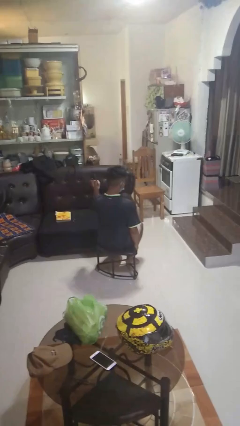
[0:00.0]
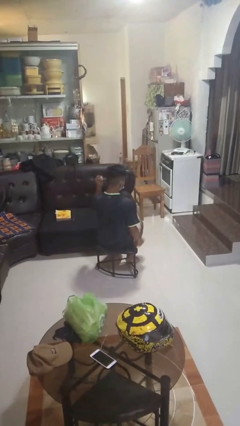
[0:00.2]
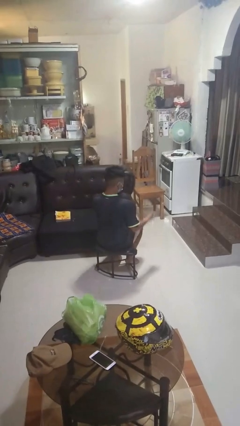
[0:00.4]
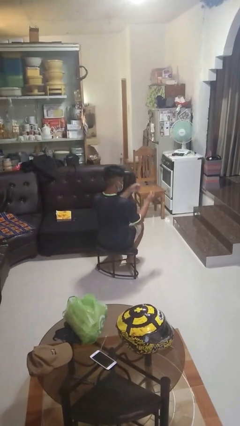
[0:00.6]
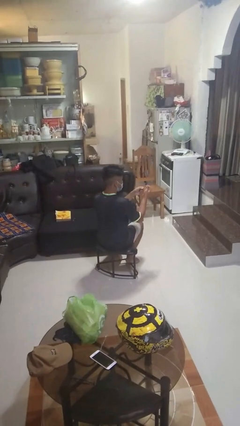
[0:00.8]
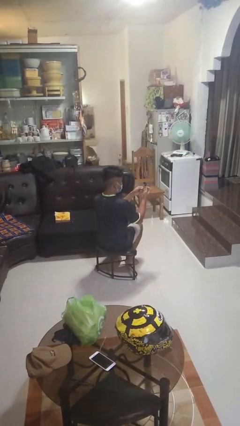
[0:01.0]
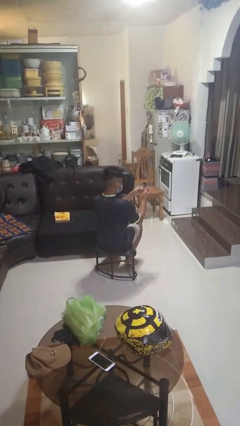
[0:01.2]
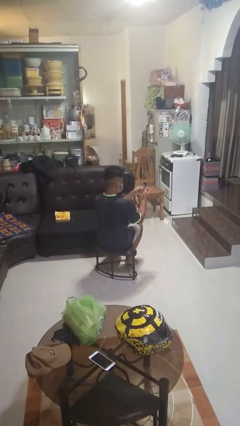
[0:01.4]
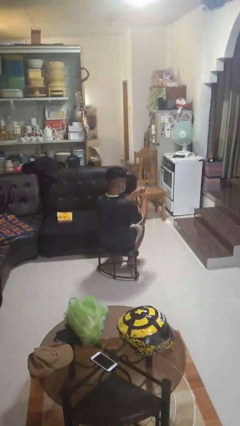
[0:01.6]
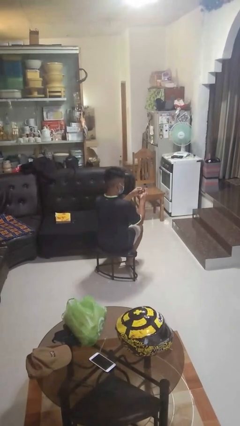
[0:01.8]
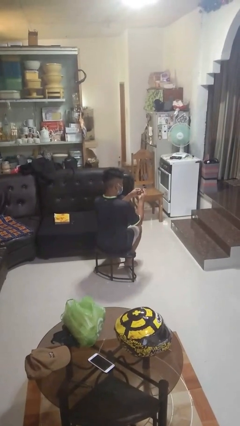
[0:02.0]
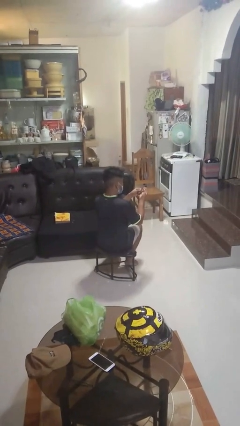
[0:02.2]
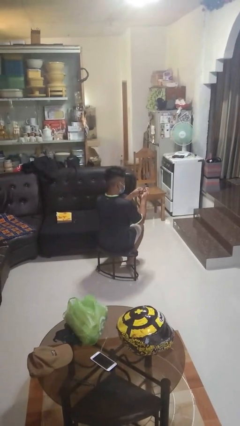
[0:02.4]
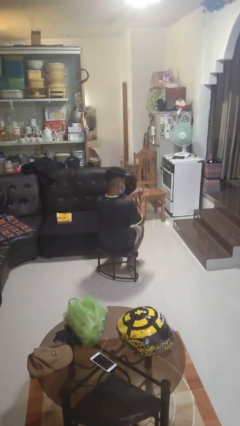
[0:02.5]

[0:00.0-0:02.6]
person files fingernails

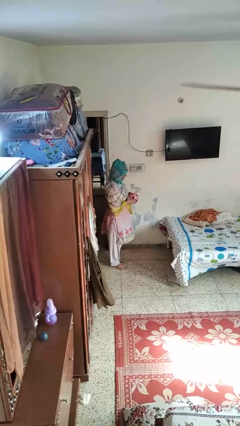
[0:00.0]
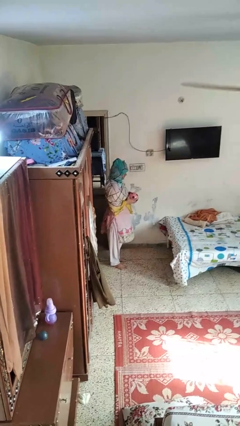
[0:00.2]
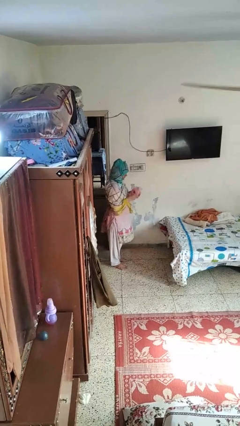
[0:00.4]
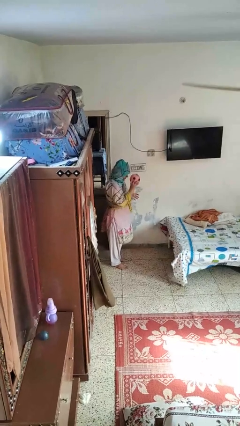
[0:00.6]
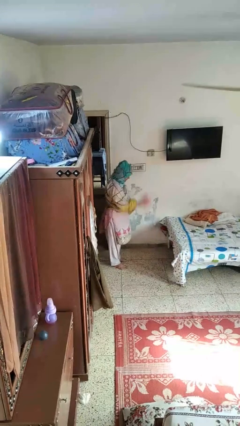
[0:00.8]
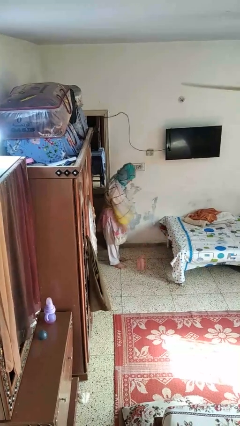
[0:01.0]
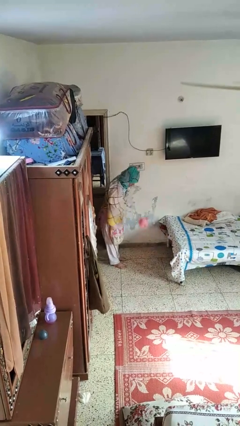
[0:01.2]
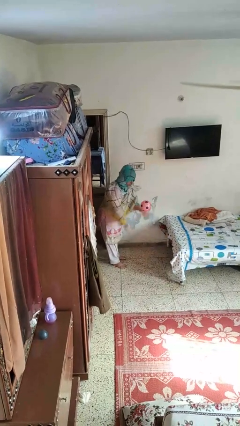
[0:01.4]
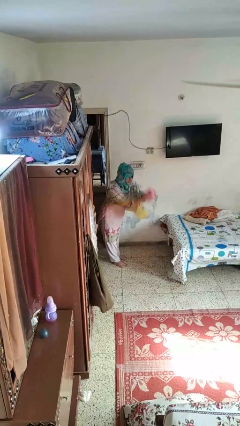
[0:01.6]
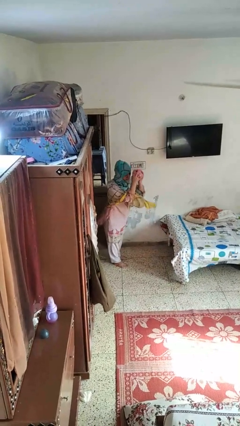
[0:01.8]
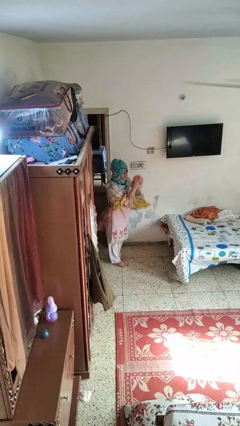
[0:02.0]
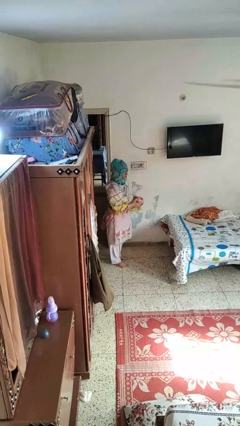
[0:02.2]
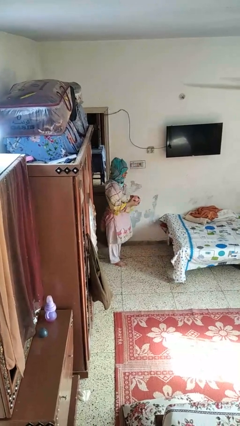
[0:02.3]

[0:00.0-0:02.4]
person bounces ball on floor

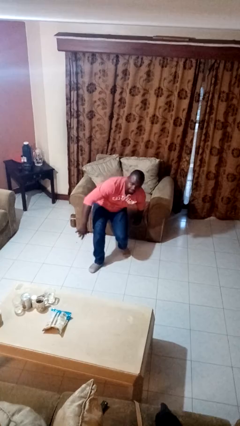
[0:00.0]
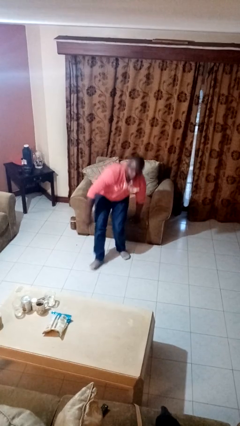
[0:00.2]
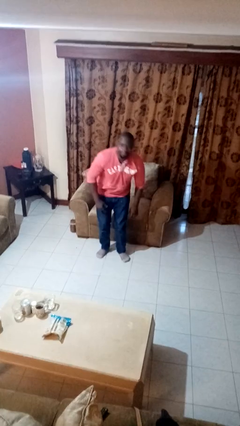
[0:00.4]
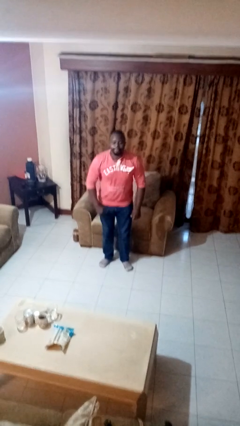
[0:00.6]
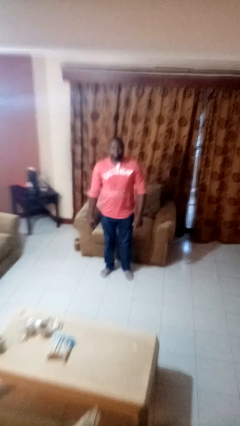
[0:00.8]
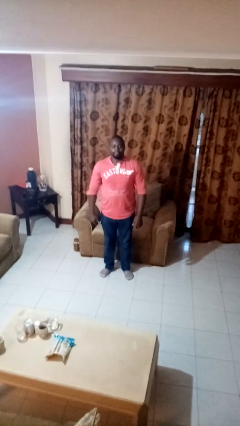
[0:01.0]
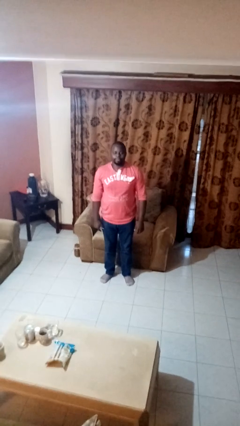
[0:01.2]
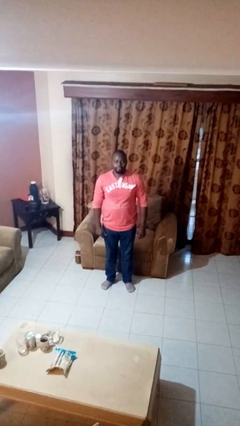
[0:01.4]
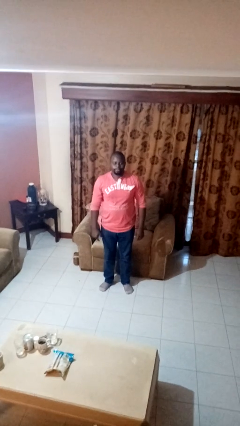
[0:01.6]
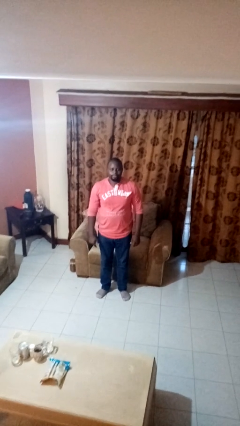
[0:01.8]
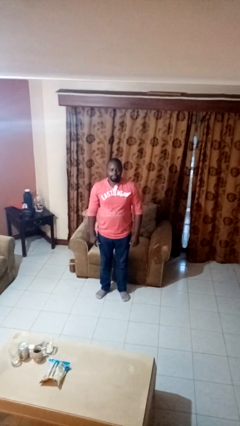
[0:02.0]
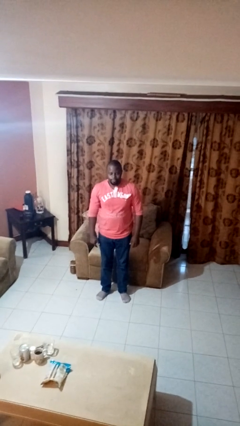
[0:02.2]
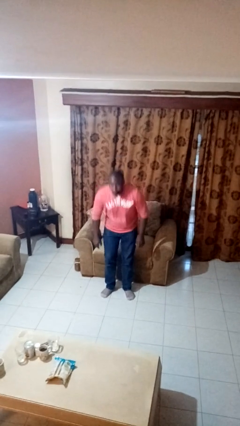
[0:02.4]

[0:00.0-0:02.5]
person stands up from floor

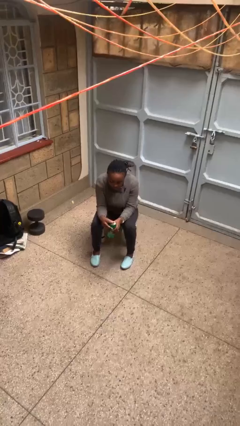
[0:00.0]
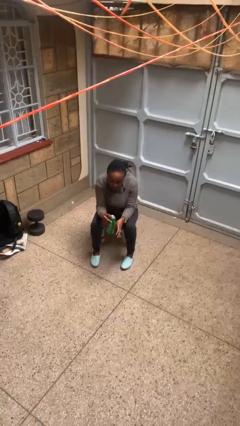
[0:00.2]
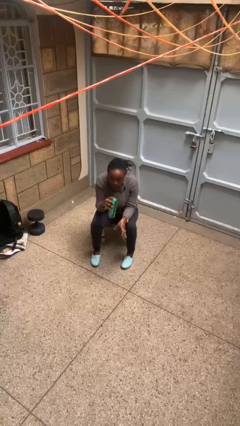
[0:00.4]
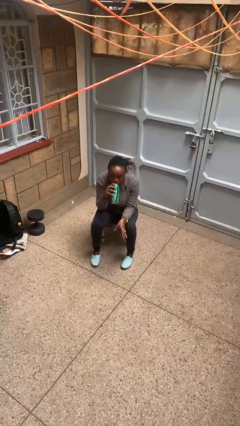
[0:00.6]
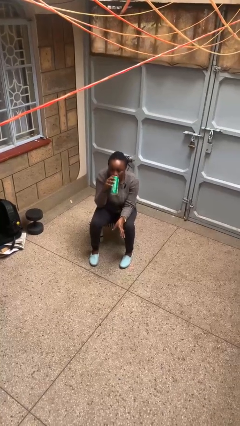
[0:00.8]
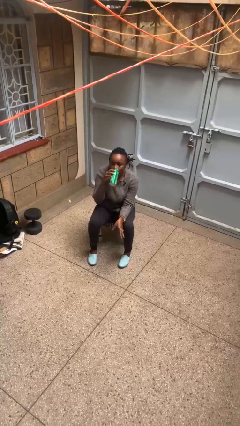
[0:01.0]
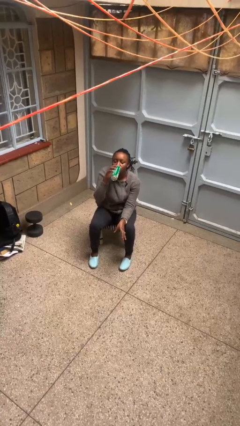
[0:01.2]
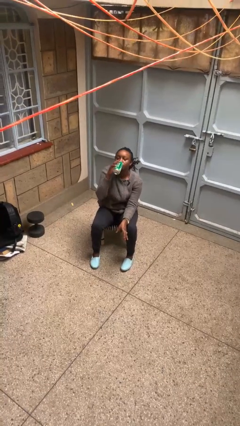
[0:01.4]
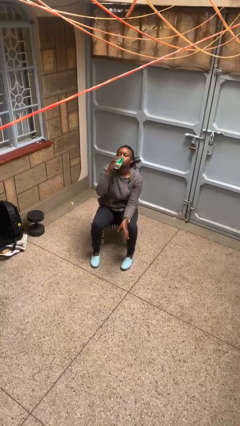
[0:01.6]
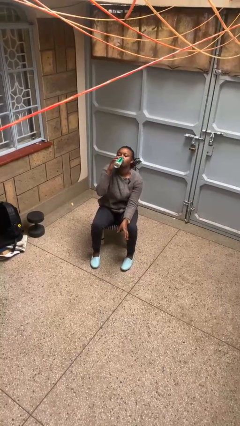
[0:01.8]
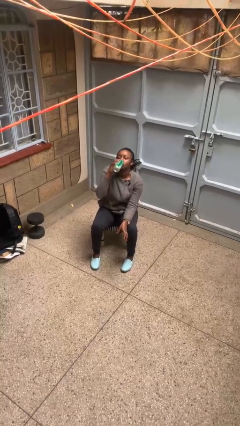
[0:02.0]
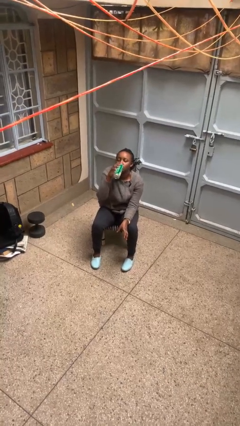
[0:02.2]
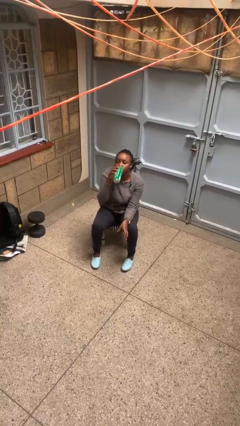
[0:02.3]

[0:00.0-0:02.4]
person drinks from beverage can

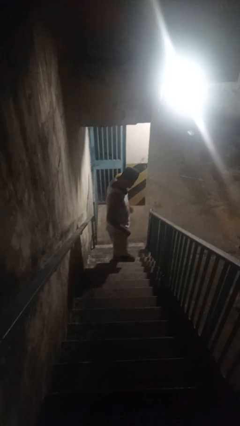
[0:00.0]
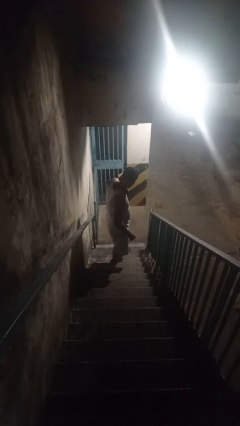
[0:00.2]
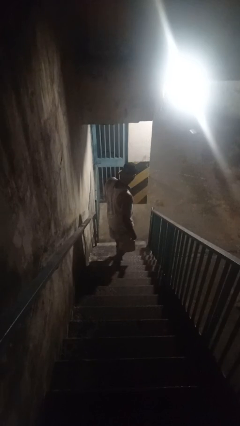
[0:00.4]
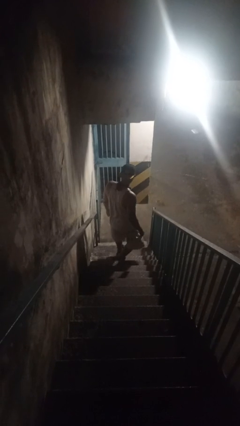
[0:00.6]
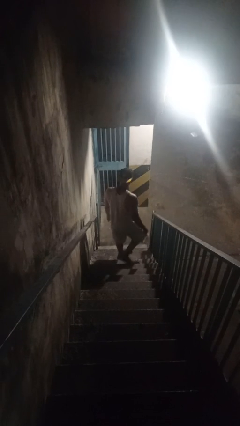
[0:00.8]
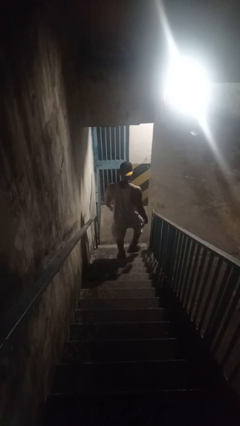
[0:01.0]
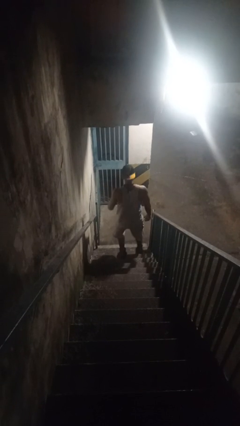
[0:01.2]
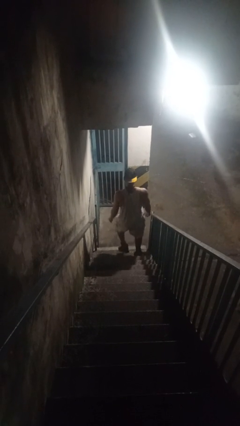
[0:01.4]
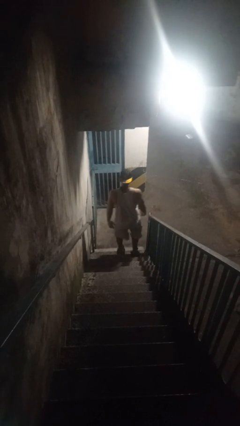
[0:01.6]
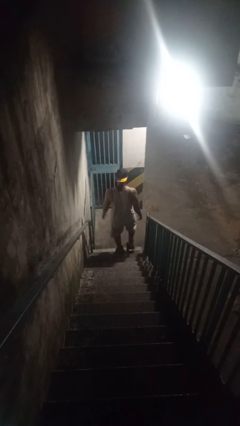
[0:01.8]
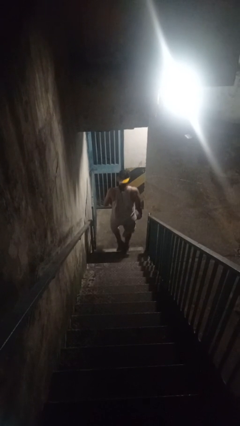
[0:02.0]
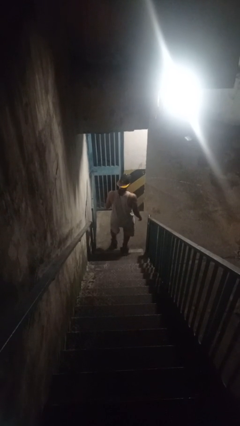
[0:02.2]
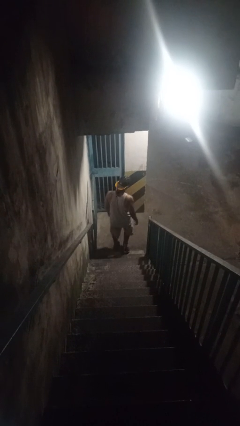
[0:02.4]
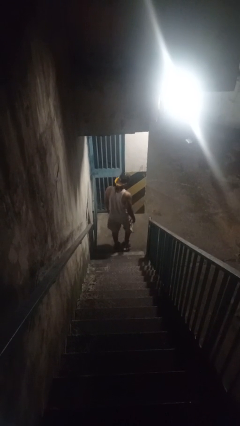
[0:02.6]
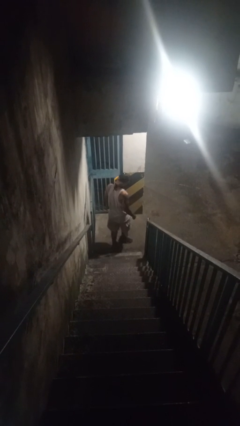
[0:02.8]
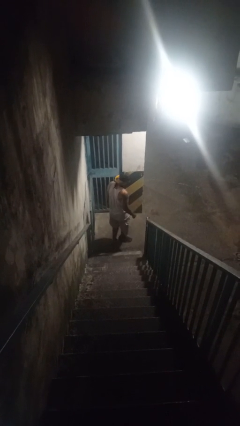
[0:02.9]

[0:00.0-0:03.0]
person climbs up stairs

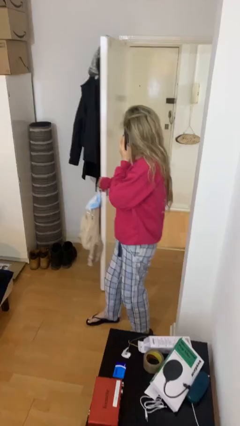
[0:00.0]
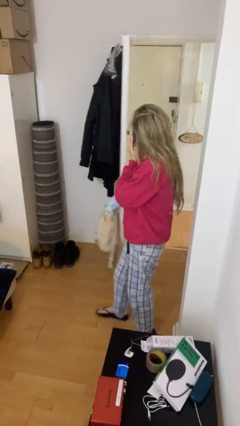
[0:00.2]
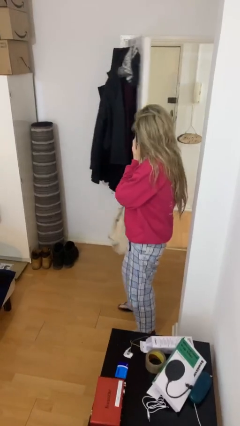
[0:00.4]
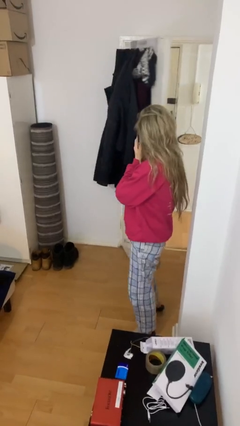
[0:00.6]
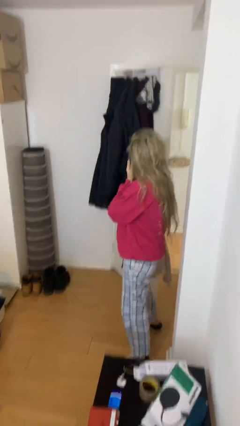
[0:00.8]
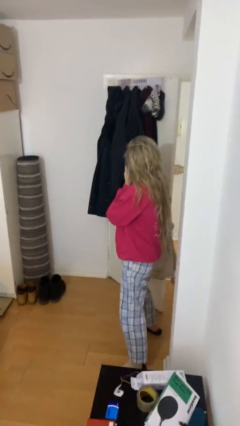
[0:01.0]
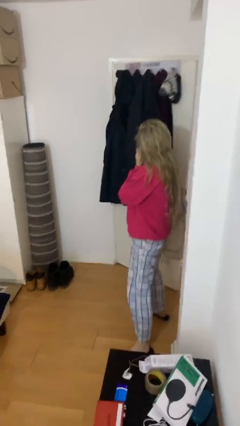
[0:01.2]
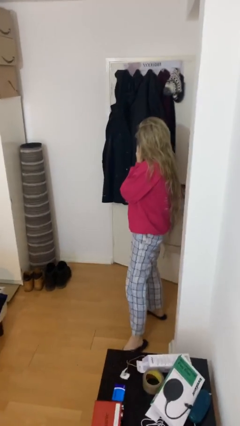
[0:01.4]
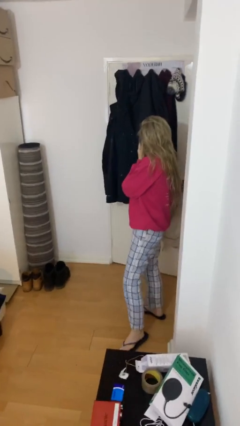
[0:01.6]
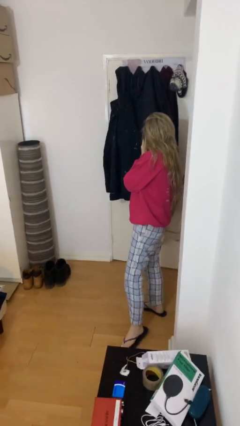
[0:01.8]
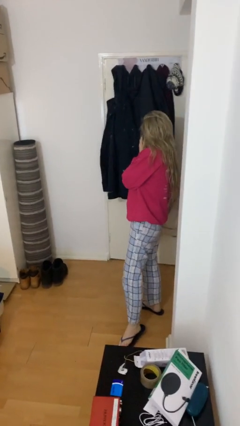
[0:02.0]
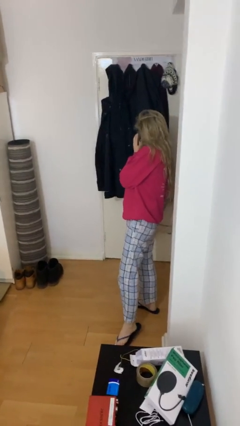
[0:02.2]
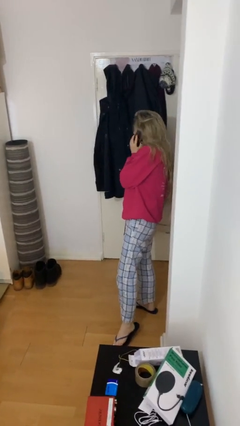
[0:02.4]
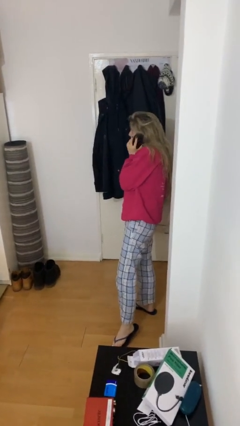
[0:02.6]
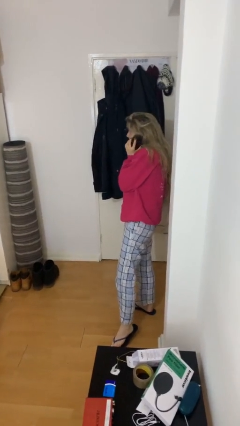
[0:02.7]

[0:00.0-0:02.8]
person closes facility door

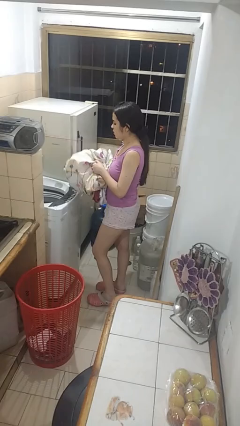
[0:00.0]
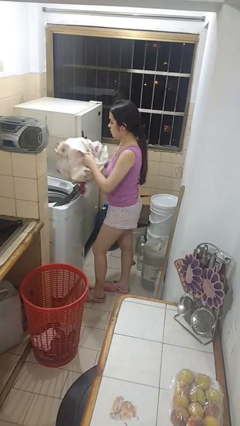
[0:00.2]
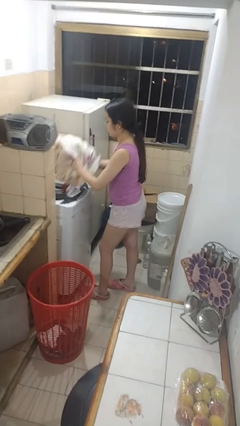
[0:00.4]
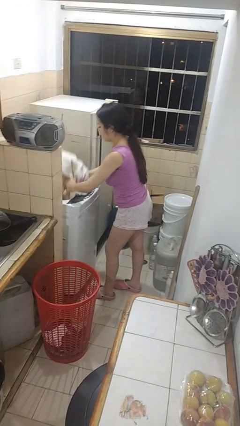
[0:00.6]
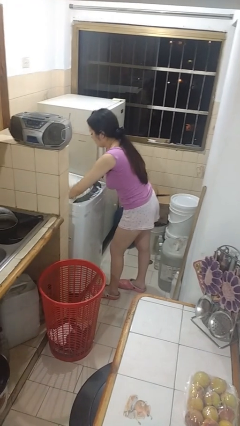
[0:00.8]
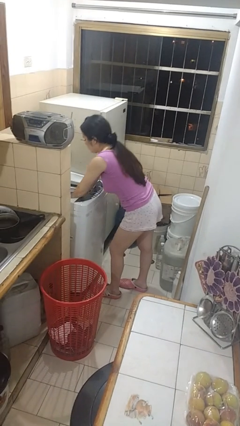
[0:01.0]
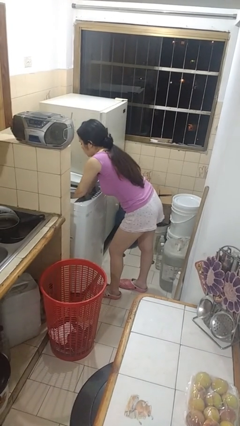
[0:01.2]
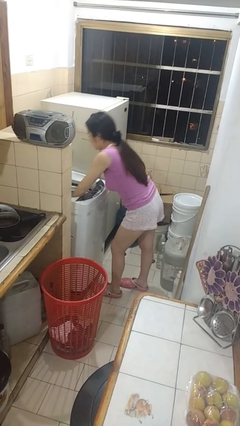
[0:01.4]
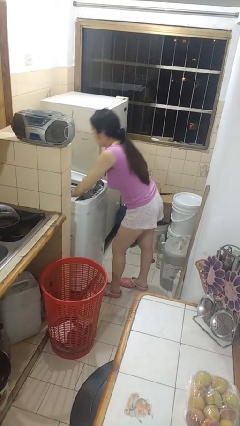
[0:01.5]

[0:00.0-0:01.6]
person loads clotheswasher

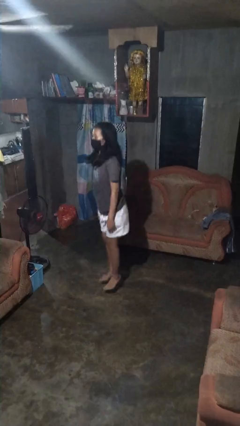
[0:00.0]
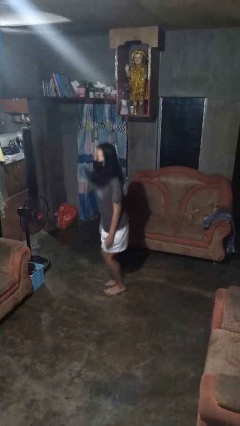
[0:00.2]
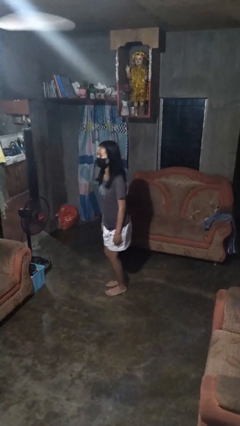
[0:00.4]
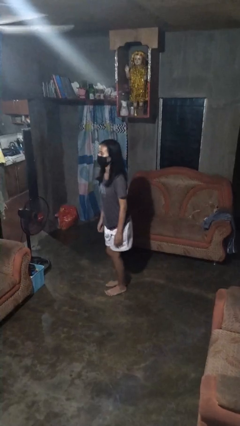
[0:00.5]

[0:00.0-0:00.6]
person jumps
